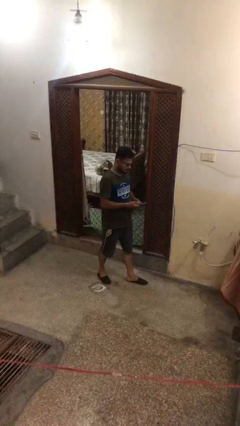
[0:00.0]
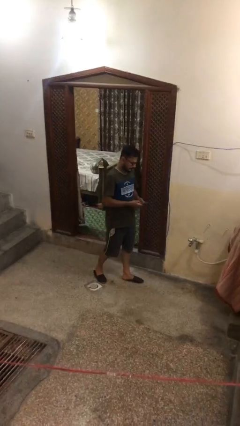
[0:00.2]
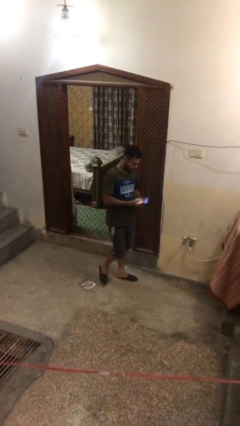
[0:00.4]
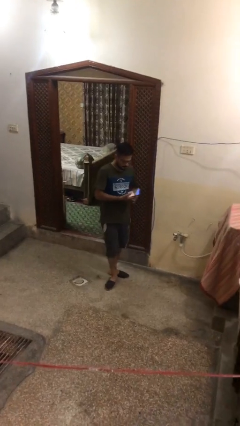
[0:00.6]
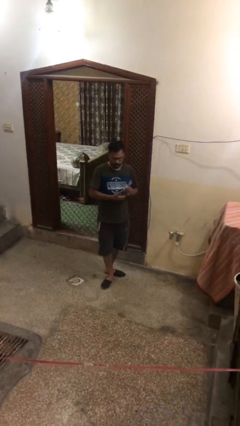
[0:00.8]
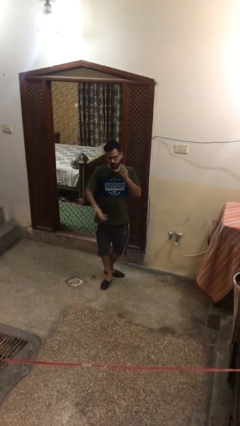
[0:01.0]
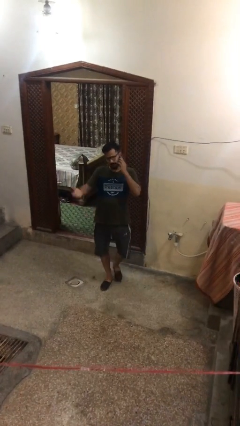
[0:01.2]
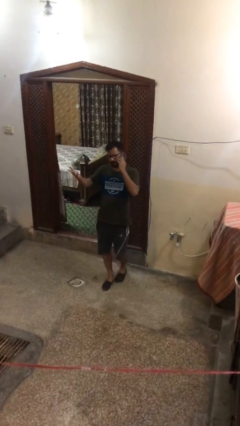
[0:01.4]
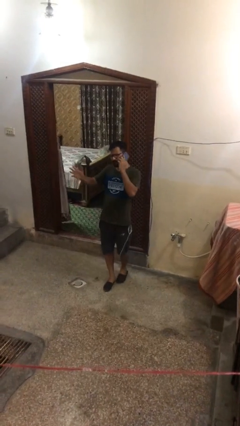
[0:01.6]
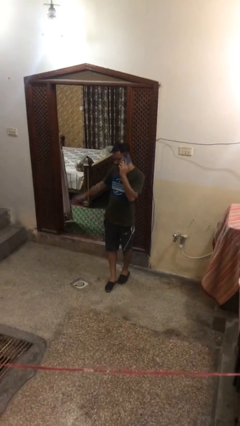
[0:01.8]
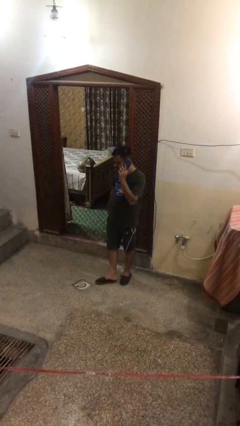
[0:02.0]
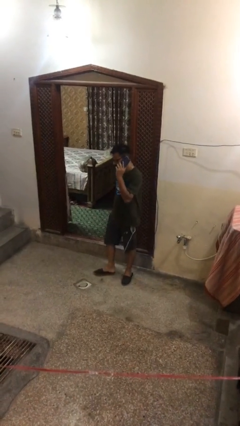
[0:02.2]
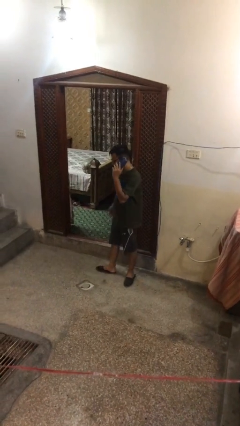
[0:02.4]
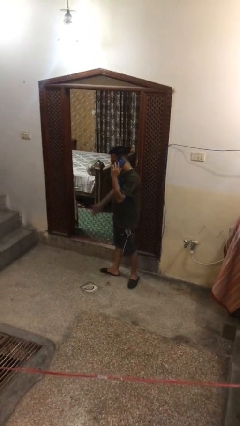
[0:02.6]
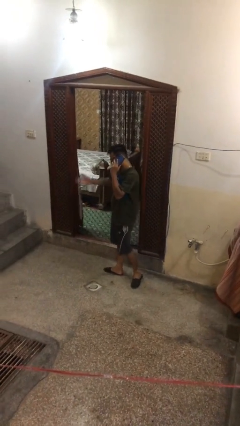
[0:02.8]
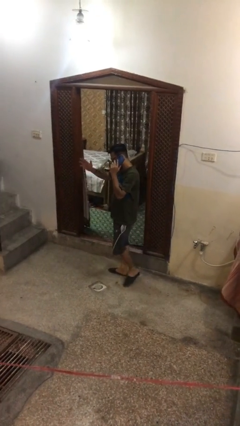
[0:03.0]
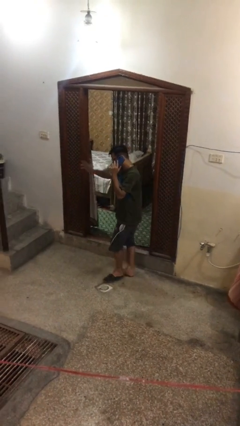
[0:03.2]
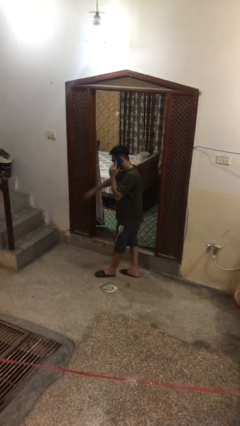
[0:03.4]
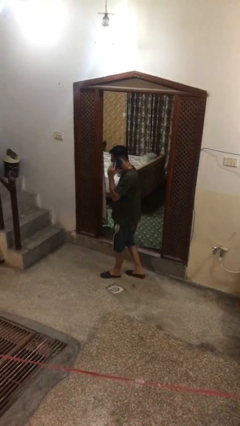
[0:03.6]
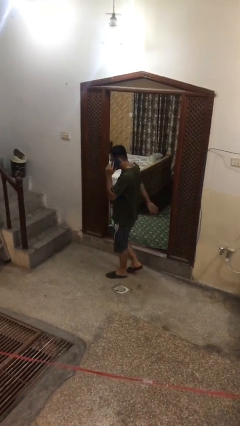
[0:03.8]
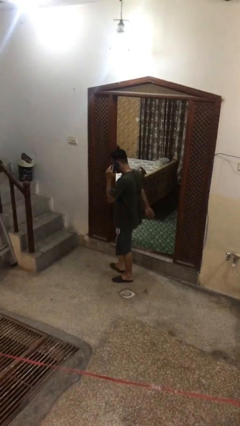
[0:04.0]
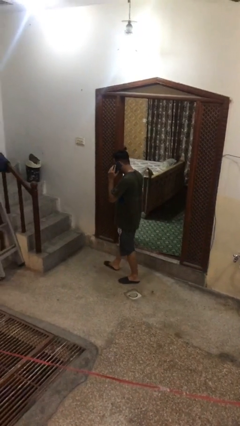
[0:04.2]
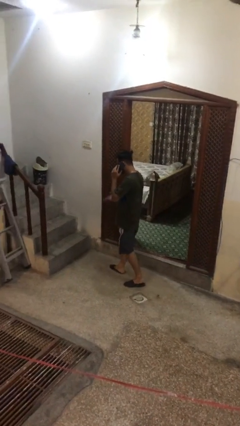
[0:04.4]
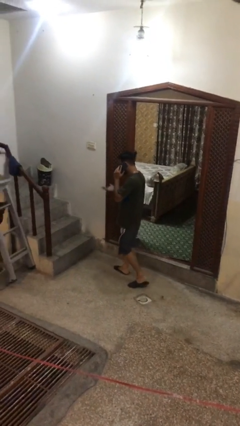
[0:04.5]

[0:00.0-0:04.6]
person talks on phone

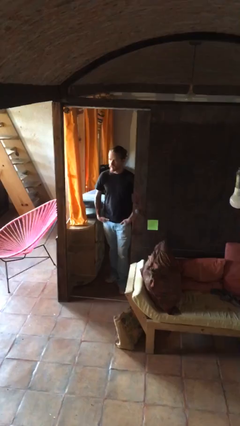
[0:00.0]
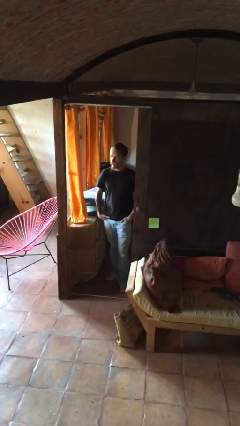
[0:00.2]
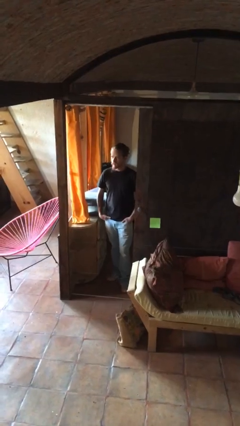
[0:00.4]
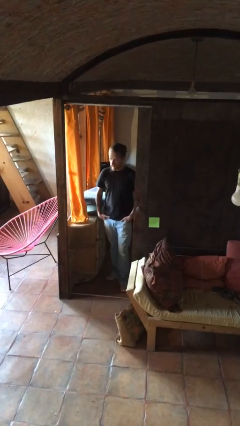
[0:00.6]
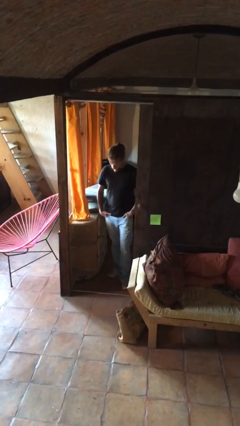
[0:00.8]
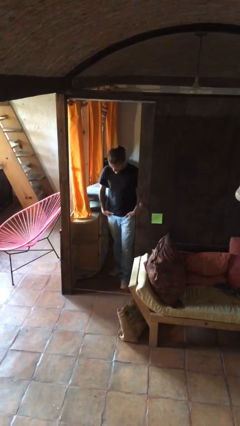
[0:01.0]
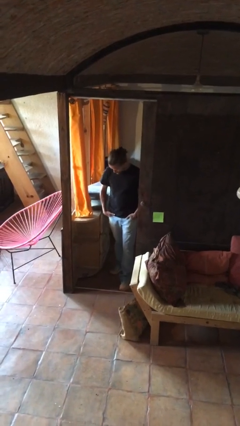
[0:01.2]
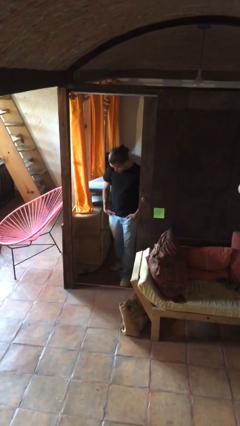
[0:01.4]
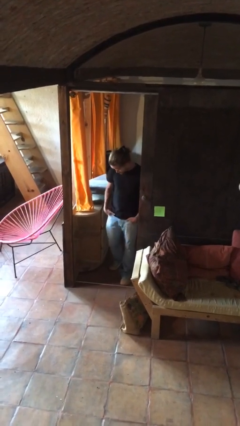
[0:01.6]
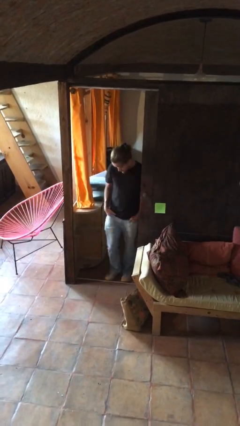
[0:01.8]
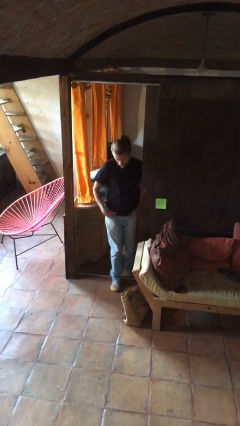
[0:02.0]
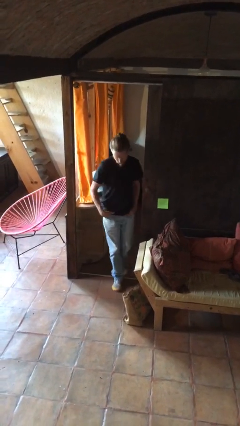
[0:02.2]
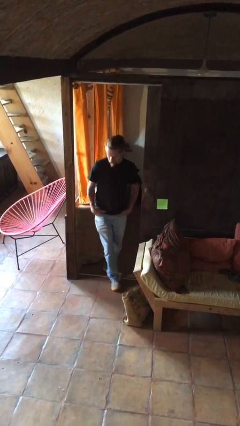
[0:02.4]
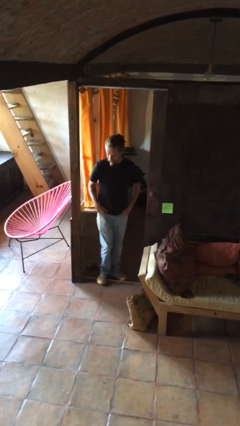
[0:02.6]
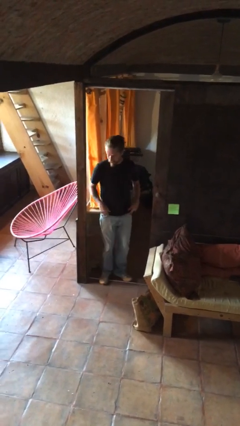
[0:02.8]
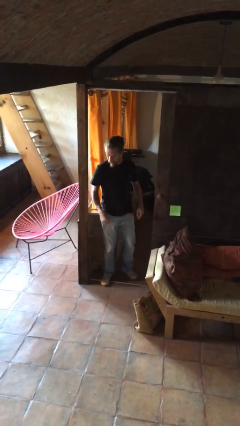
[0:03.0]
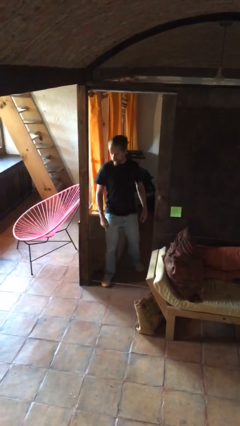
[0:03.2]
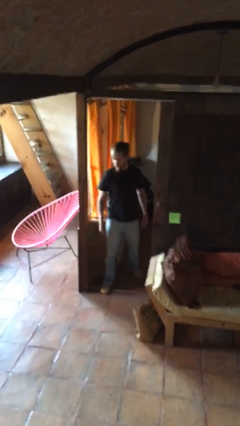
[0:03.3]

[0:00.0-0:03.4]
person bumps into wall

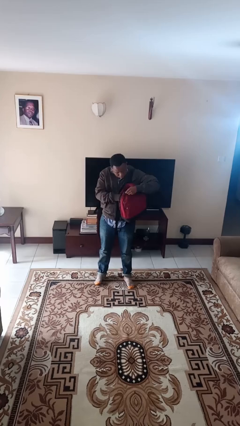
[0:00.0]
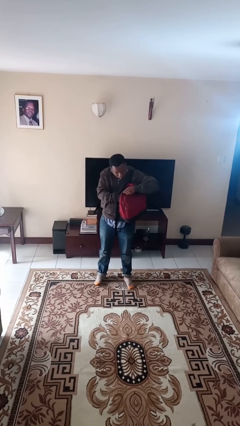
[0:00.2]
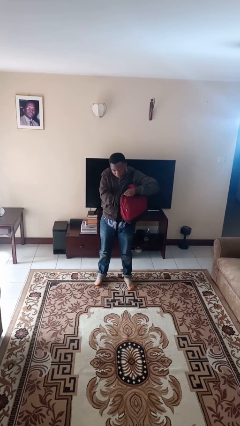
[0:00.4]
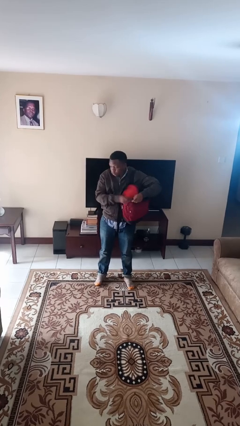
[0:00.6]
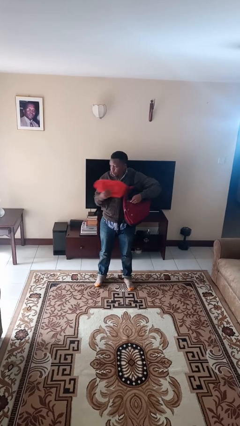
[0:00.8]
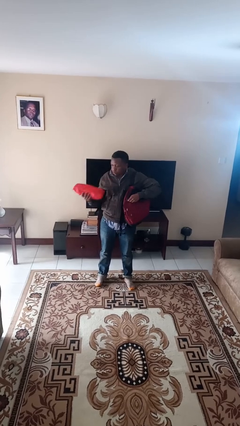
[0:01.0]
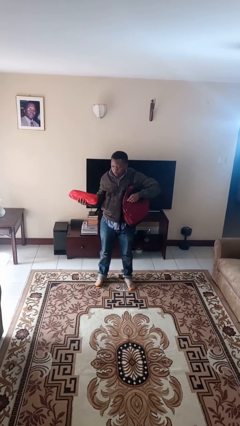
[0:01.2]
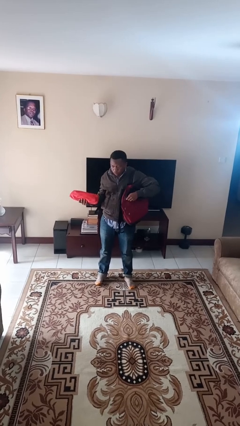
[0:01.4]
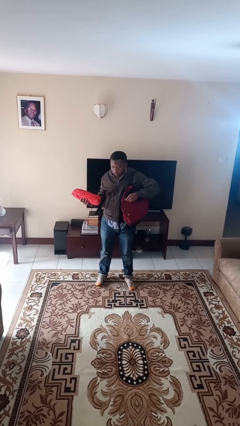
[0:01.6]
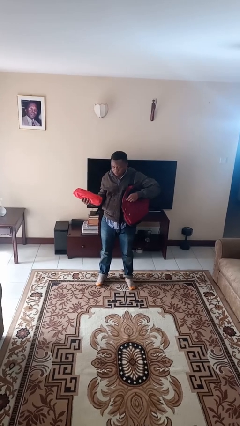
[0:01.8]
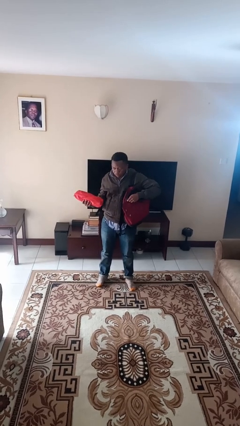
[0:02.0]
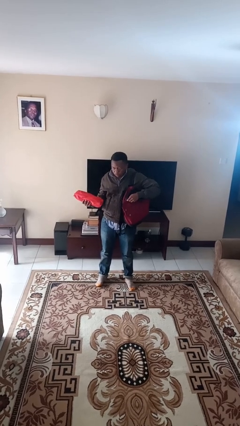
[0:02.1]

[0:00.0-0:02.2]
person takes object from backpack

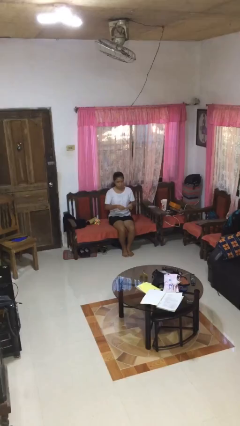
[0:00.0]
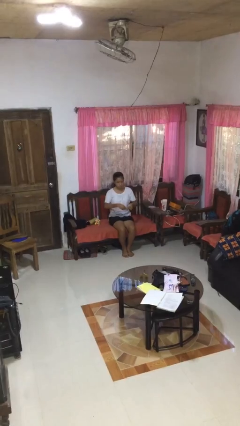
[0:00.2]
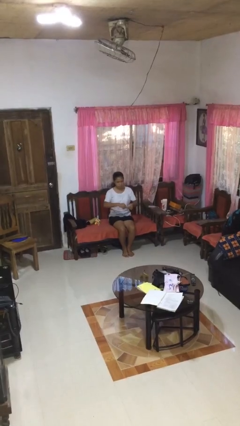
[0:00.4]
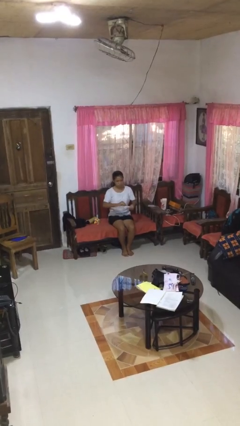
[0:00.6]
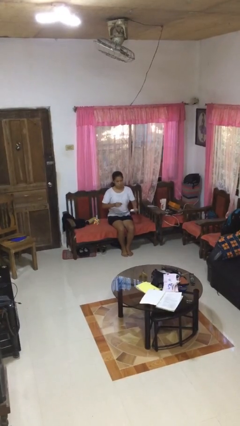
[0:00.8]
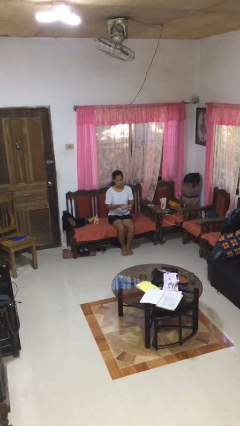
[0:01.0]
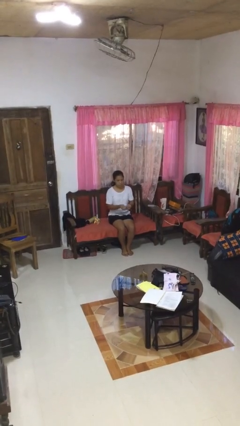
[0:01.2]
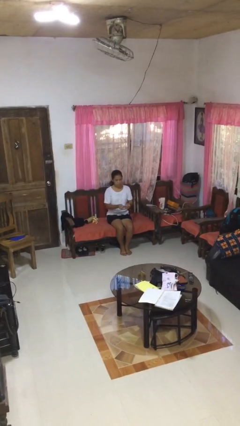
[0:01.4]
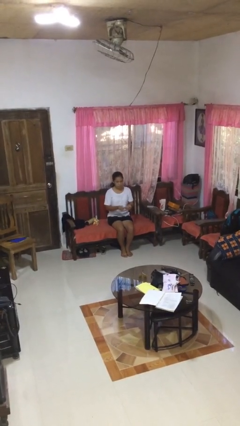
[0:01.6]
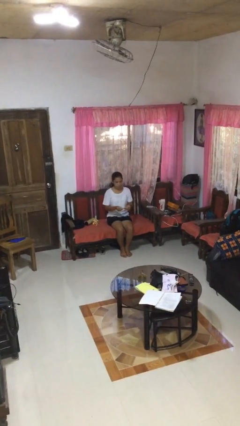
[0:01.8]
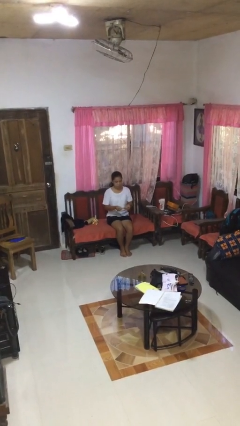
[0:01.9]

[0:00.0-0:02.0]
person tears paper

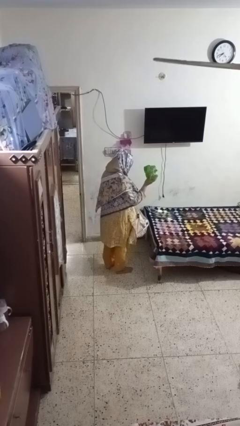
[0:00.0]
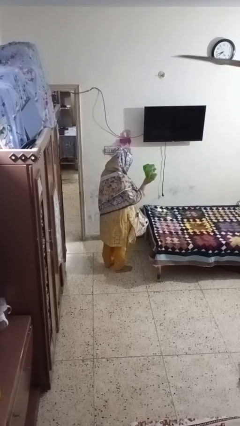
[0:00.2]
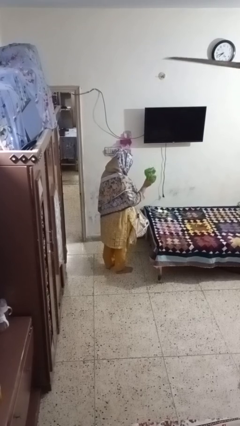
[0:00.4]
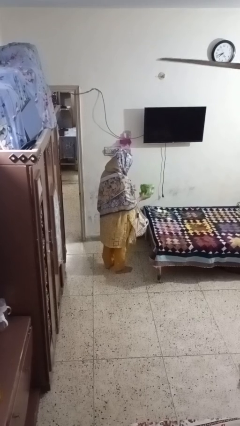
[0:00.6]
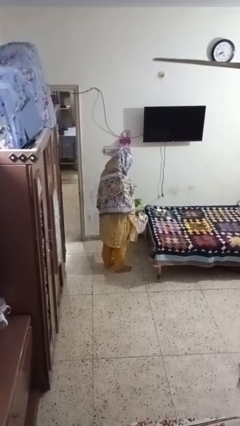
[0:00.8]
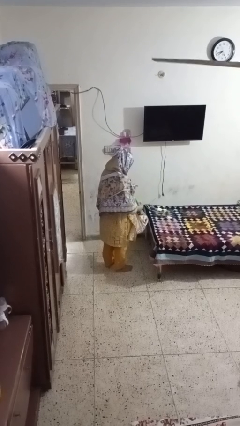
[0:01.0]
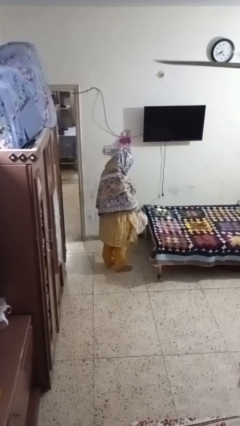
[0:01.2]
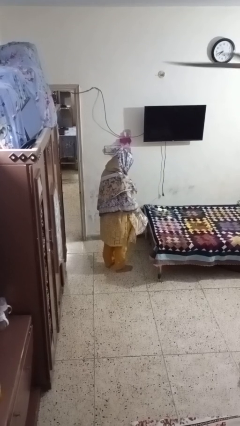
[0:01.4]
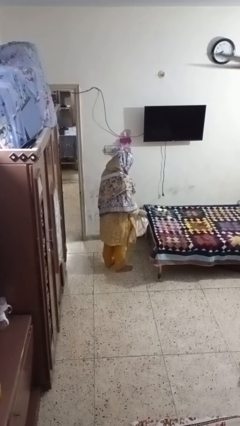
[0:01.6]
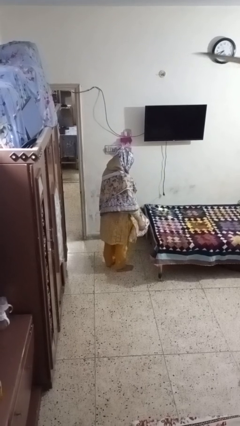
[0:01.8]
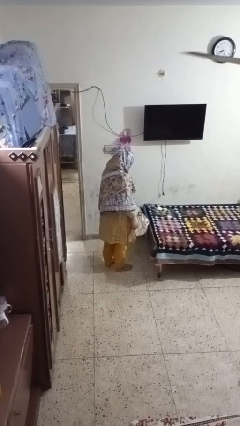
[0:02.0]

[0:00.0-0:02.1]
person puts object into bag

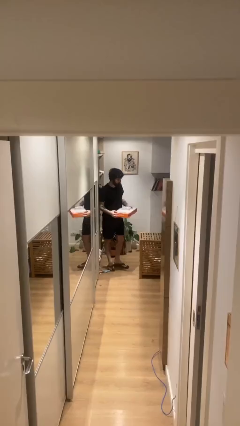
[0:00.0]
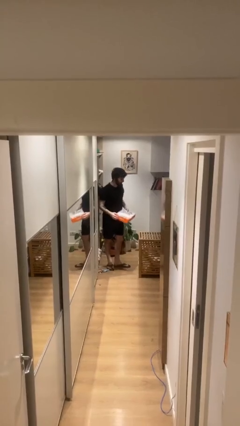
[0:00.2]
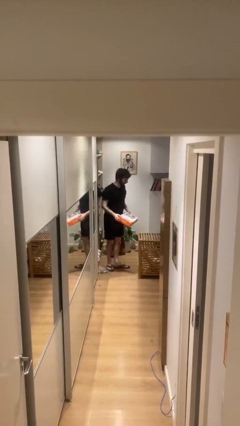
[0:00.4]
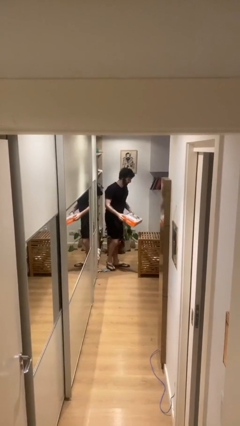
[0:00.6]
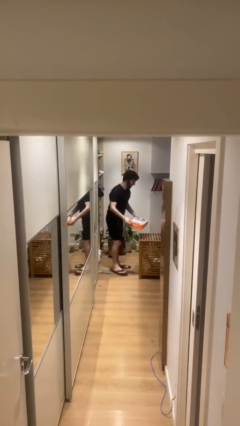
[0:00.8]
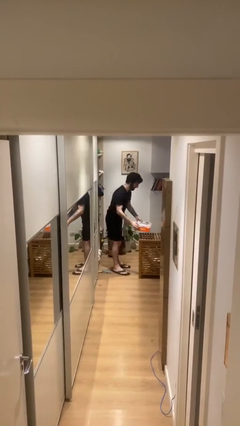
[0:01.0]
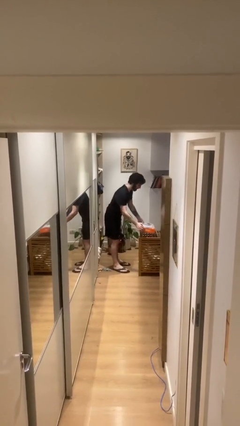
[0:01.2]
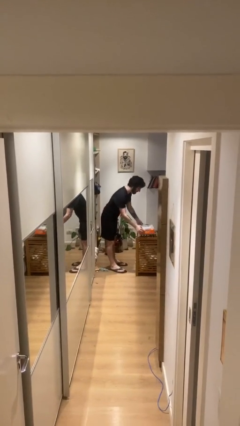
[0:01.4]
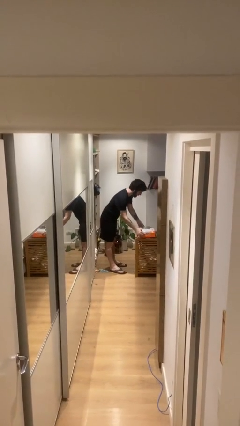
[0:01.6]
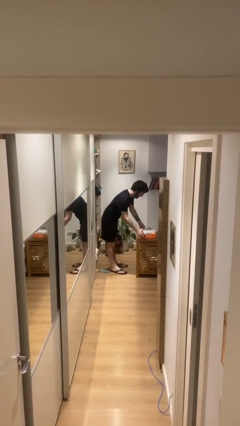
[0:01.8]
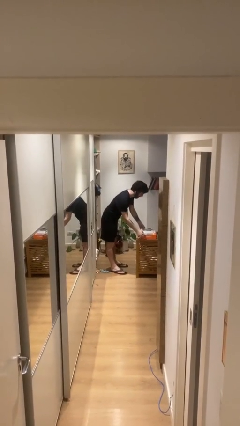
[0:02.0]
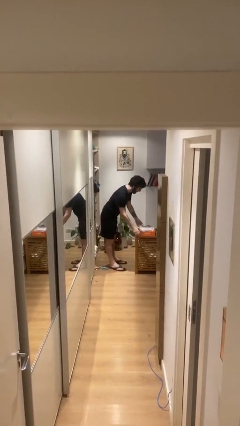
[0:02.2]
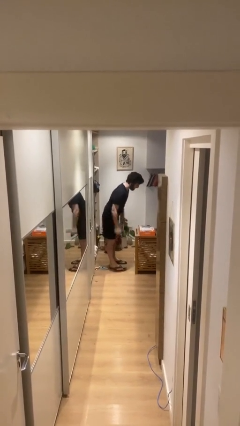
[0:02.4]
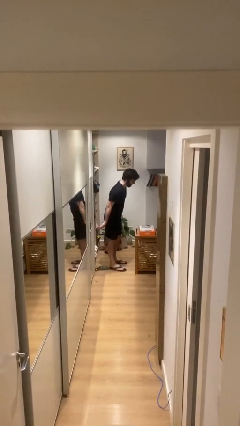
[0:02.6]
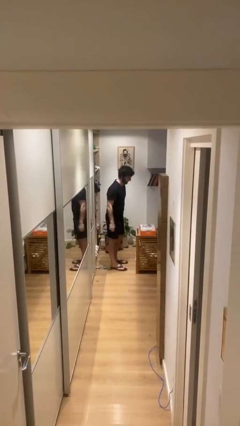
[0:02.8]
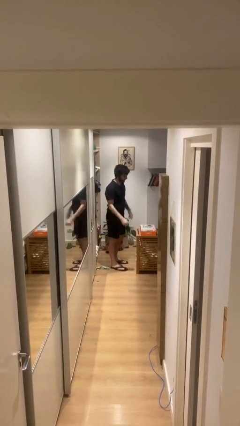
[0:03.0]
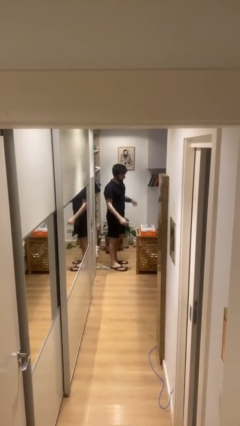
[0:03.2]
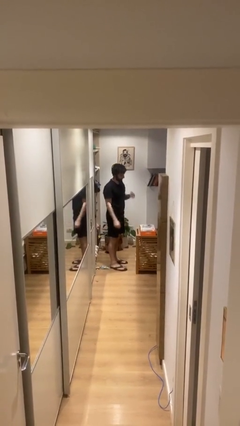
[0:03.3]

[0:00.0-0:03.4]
person puts down object on table
